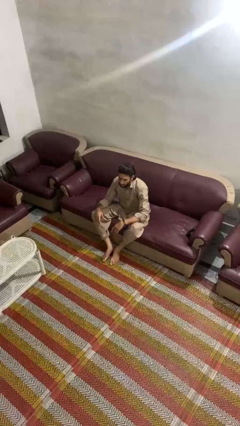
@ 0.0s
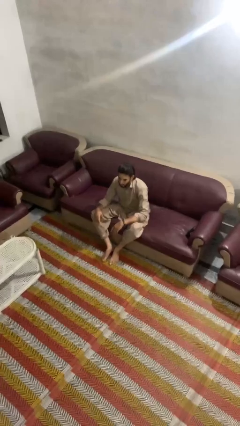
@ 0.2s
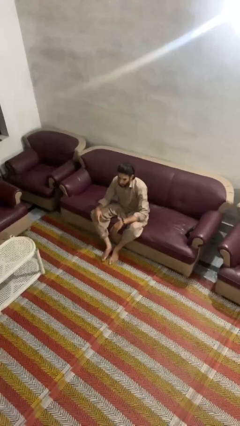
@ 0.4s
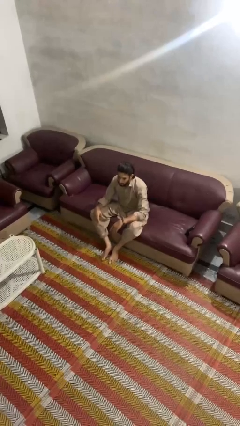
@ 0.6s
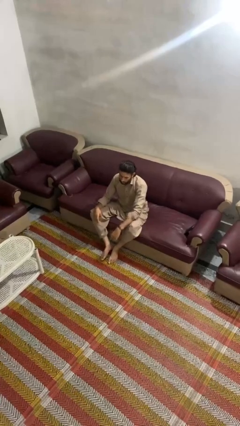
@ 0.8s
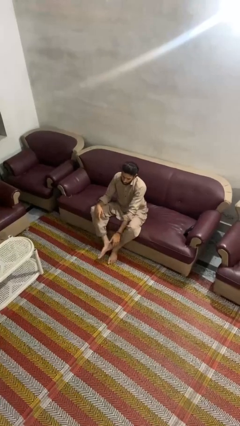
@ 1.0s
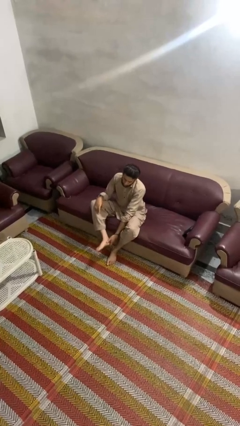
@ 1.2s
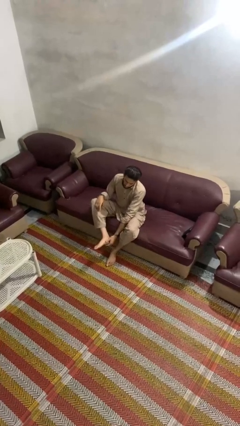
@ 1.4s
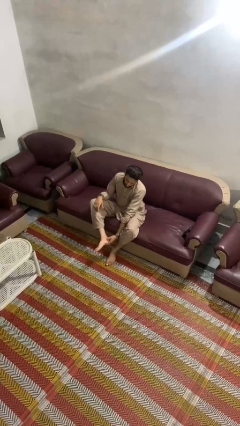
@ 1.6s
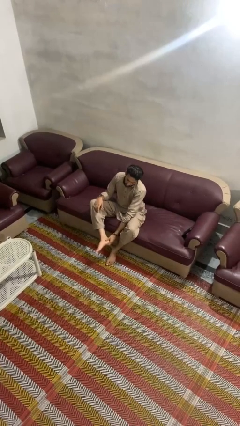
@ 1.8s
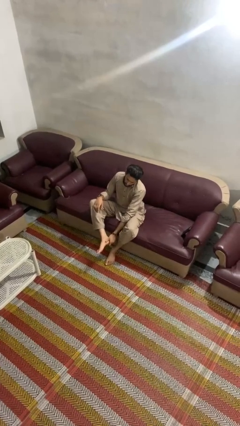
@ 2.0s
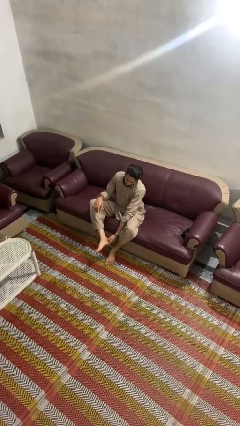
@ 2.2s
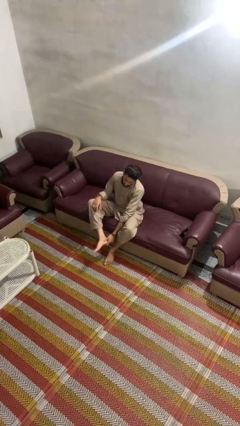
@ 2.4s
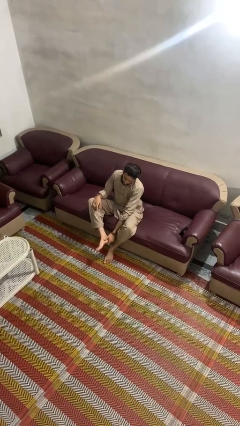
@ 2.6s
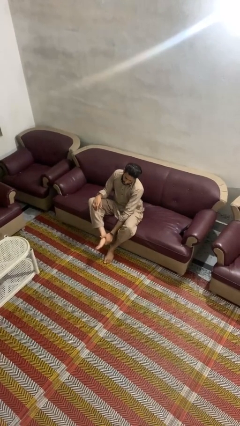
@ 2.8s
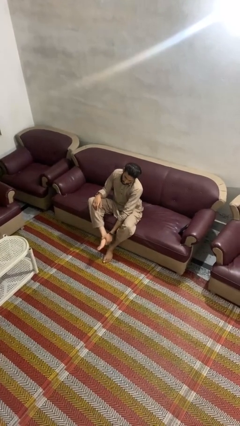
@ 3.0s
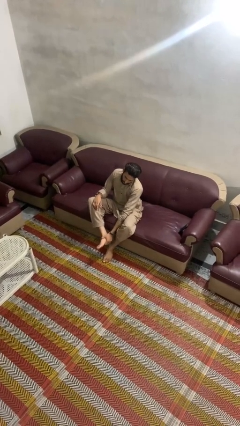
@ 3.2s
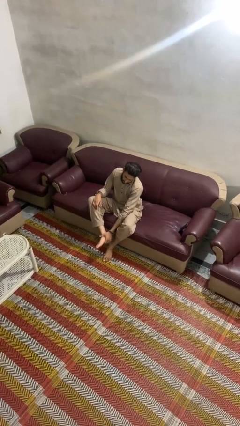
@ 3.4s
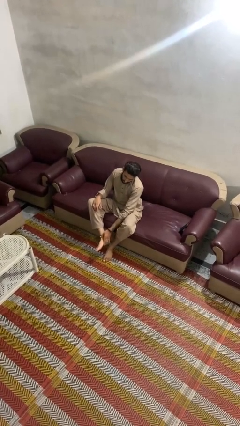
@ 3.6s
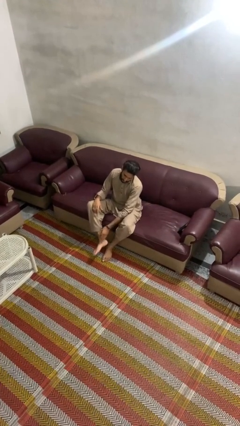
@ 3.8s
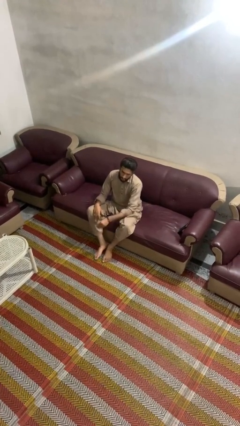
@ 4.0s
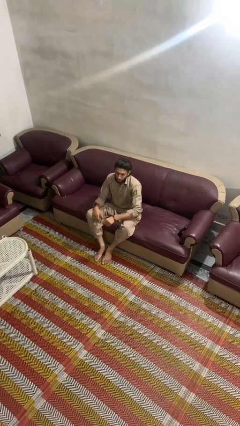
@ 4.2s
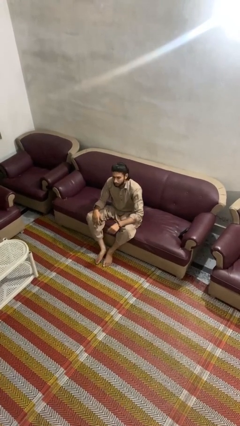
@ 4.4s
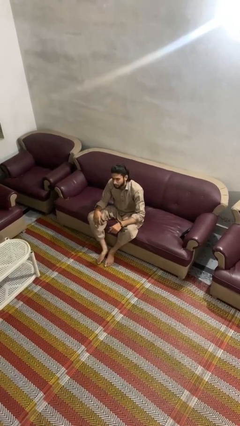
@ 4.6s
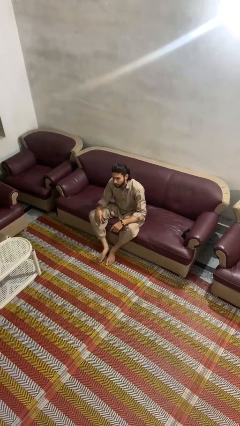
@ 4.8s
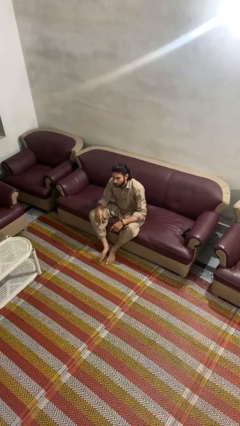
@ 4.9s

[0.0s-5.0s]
person rubs foot

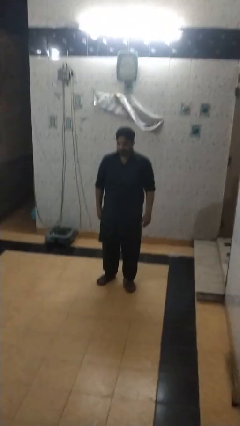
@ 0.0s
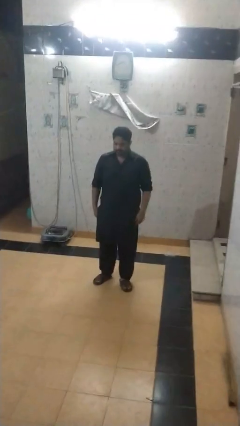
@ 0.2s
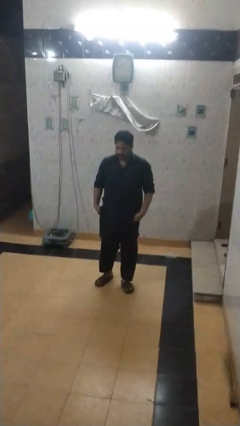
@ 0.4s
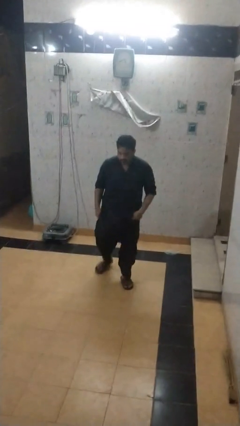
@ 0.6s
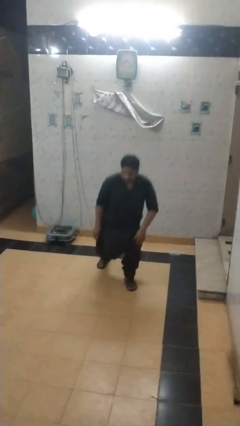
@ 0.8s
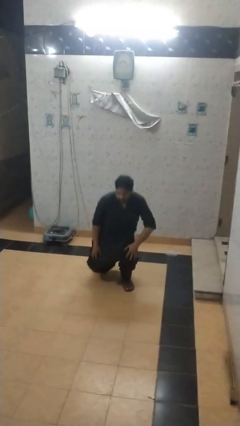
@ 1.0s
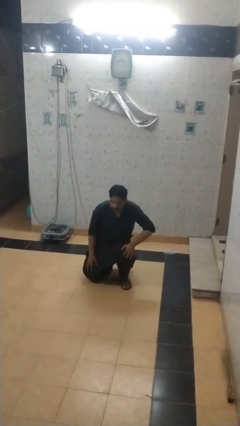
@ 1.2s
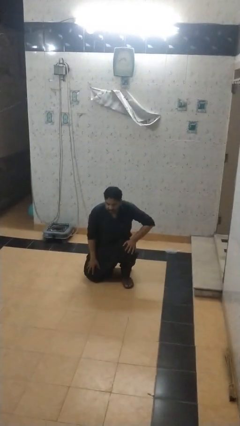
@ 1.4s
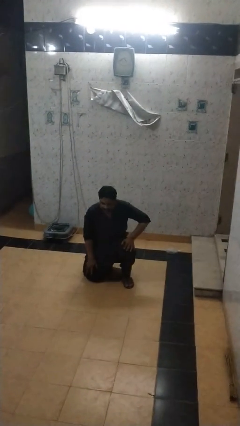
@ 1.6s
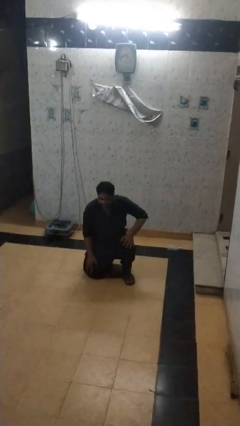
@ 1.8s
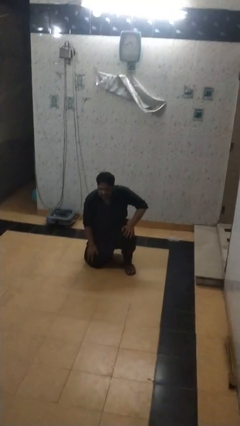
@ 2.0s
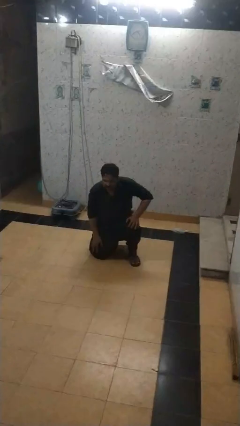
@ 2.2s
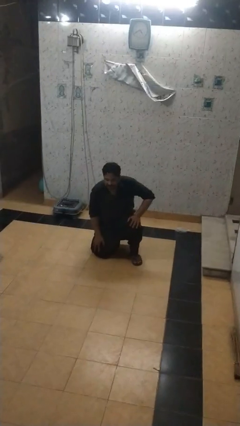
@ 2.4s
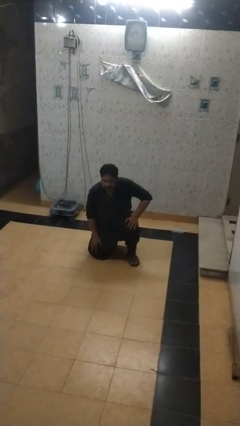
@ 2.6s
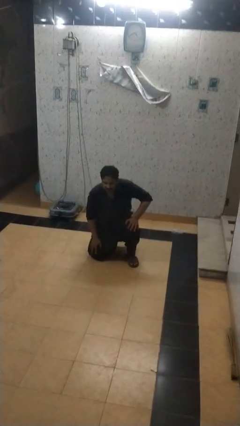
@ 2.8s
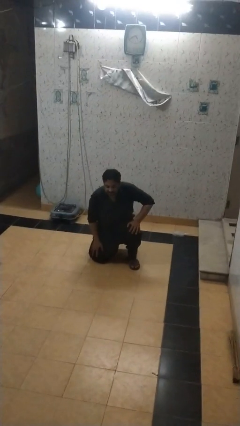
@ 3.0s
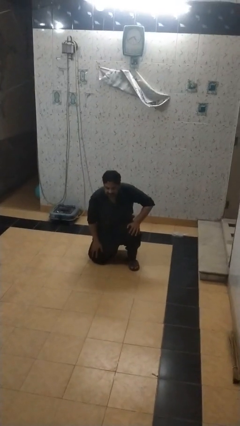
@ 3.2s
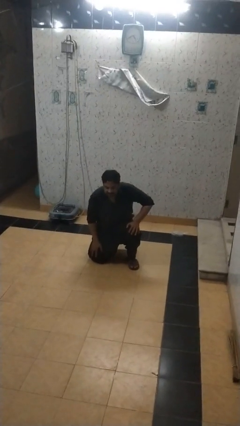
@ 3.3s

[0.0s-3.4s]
person kneels

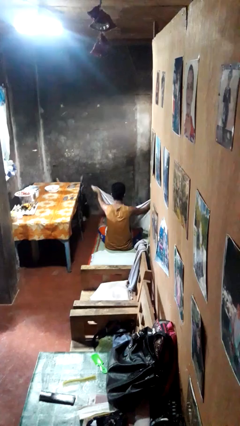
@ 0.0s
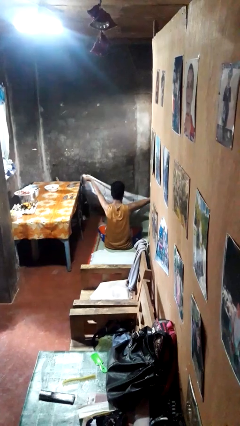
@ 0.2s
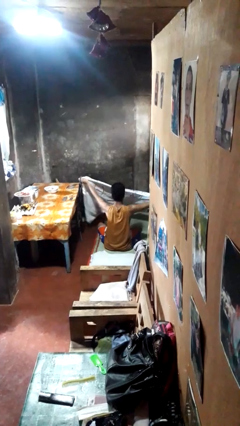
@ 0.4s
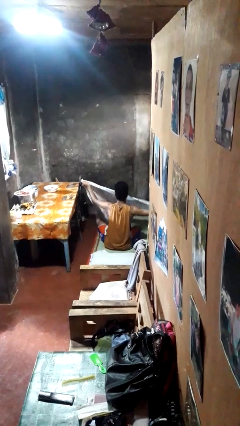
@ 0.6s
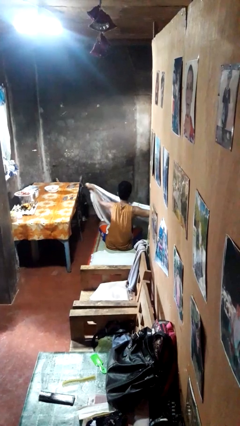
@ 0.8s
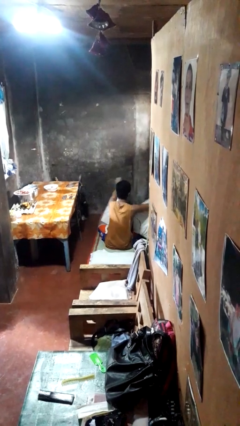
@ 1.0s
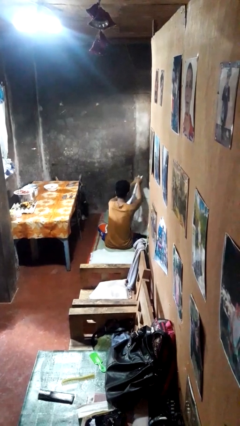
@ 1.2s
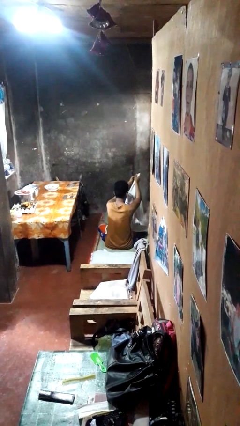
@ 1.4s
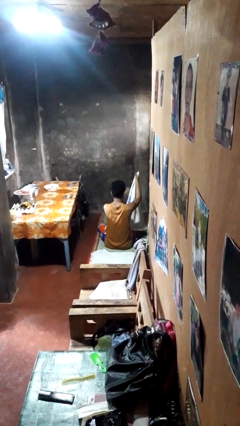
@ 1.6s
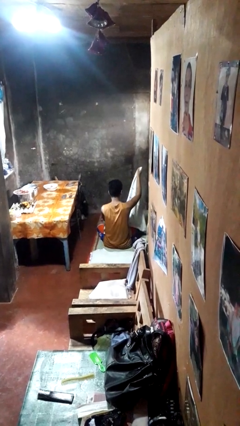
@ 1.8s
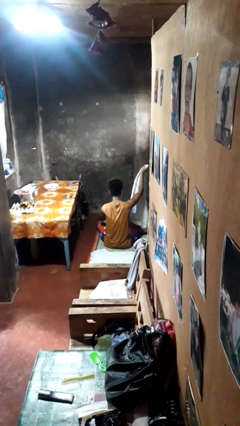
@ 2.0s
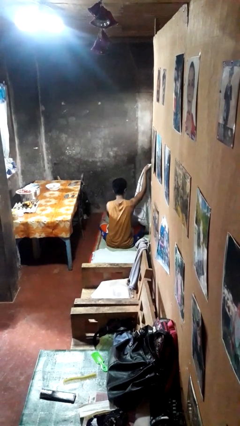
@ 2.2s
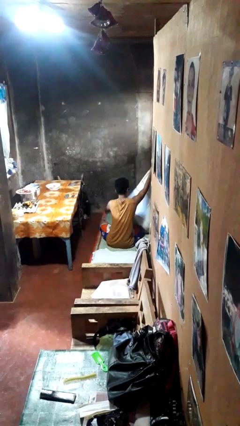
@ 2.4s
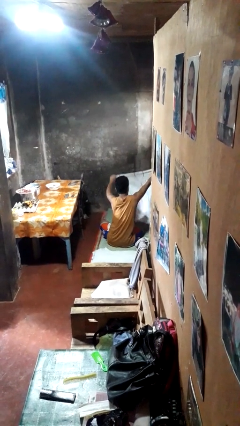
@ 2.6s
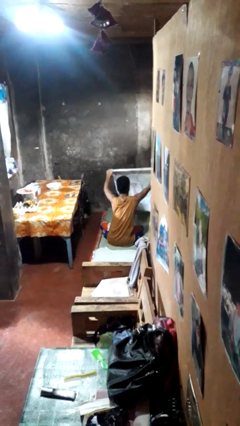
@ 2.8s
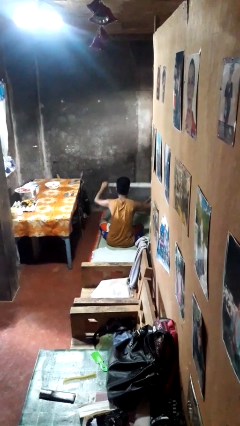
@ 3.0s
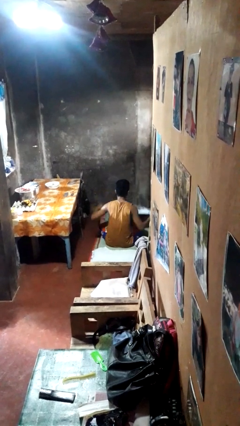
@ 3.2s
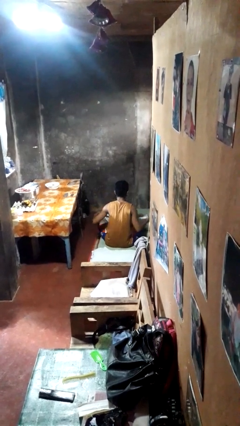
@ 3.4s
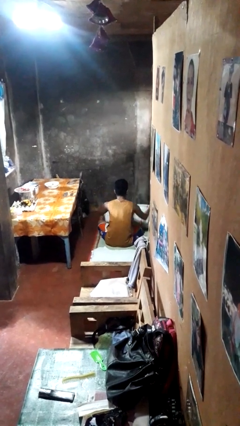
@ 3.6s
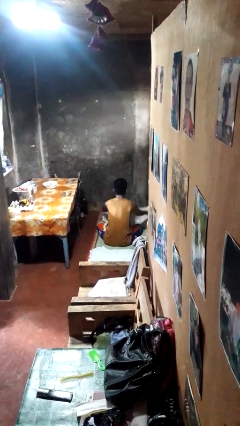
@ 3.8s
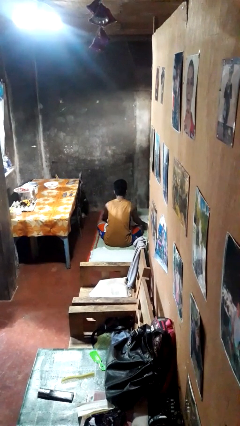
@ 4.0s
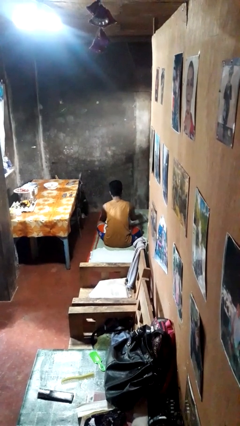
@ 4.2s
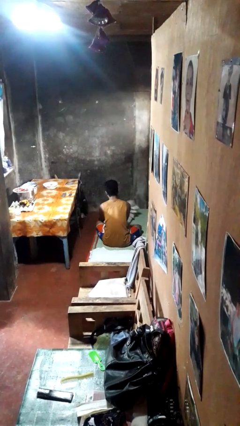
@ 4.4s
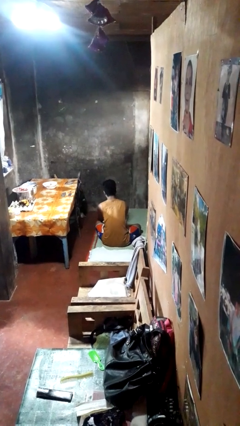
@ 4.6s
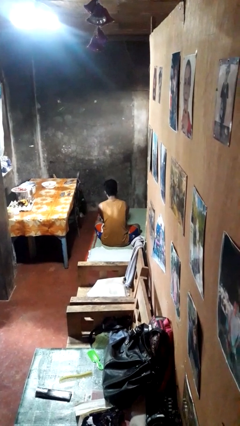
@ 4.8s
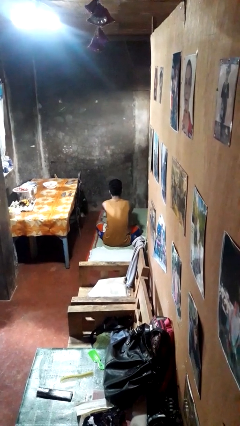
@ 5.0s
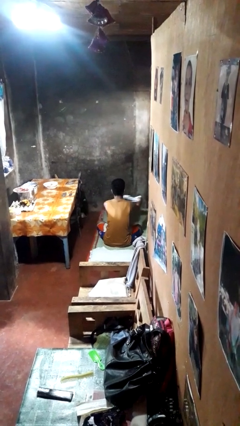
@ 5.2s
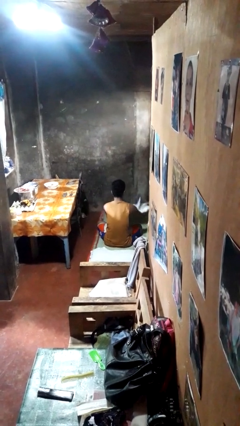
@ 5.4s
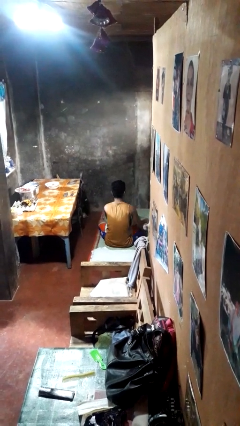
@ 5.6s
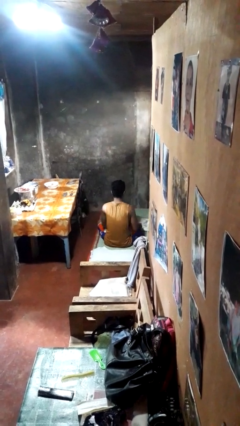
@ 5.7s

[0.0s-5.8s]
person folds blanket

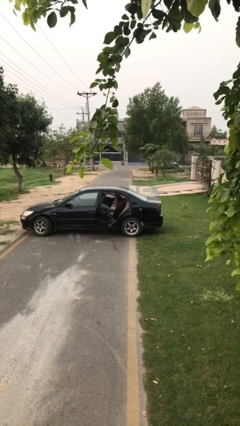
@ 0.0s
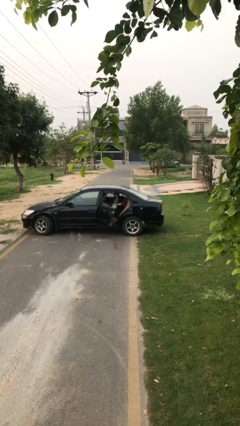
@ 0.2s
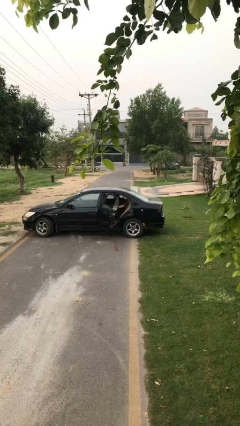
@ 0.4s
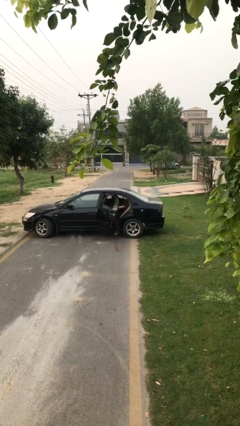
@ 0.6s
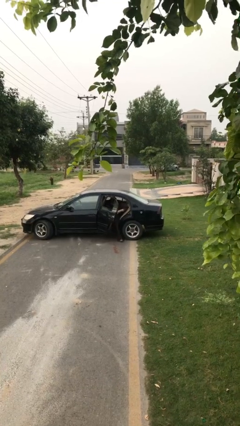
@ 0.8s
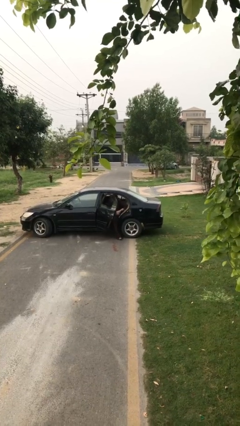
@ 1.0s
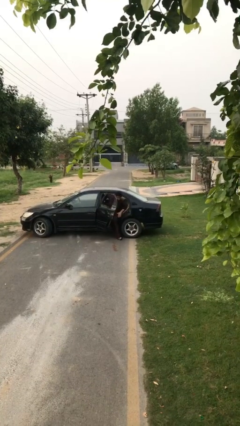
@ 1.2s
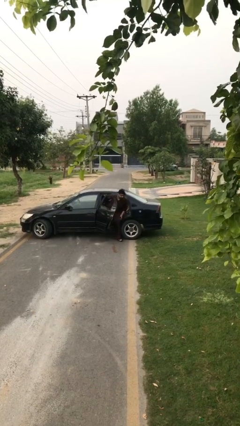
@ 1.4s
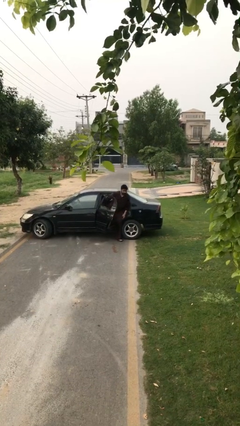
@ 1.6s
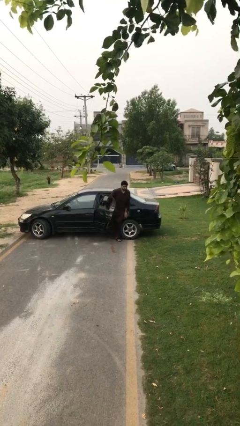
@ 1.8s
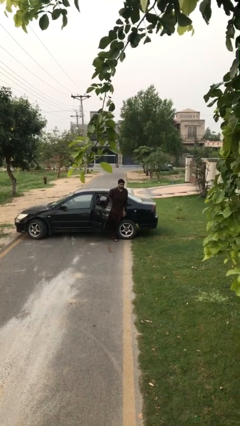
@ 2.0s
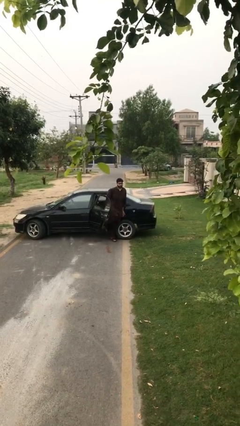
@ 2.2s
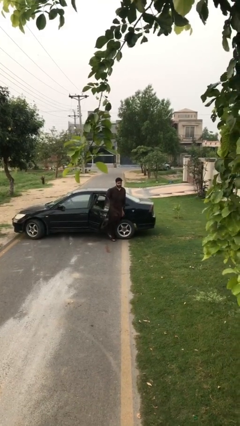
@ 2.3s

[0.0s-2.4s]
person exits car

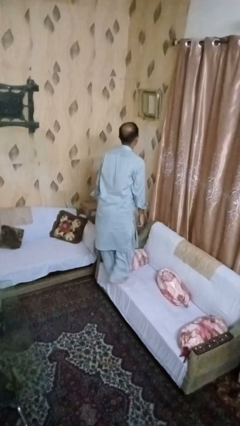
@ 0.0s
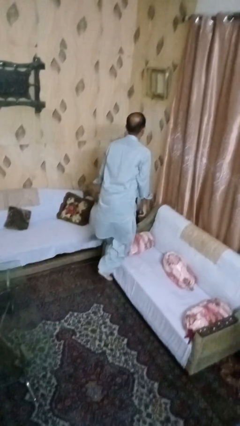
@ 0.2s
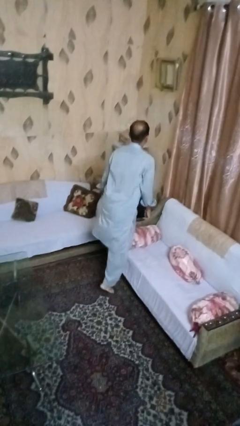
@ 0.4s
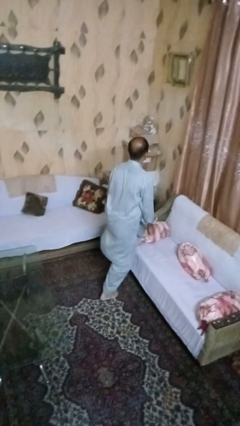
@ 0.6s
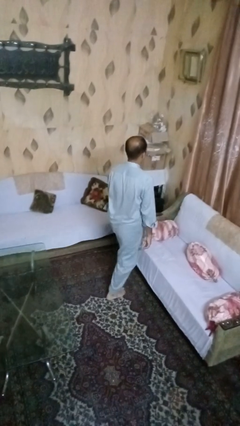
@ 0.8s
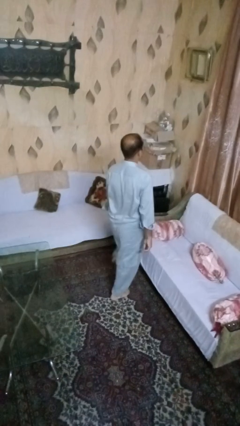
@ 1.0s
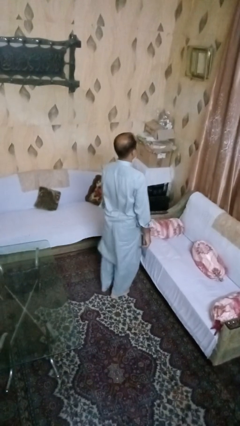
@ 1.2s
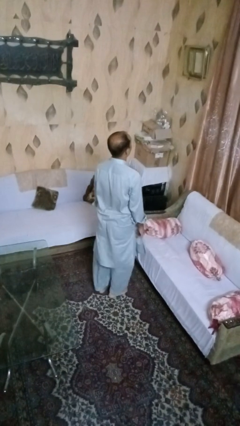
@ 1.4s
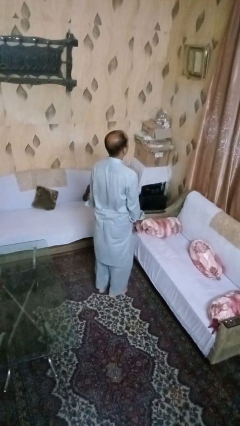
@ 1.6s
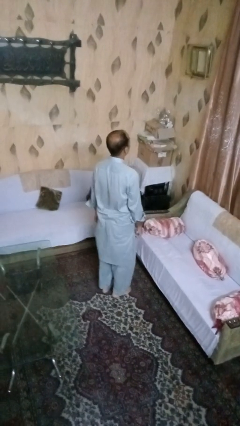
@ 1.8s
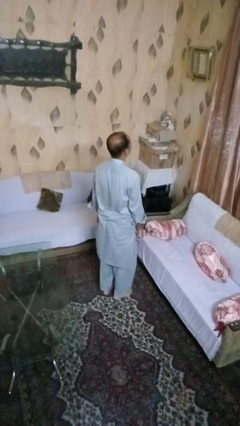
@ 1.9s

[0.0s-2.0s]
person climbs off couch
